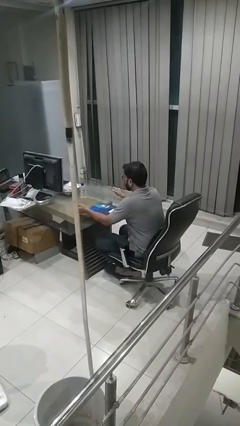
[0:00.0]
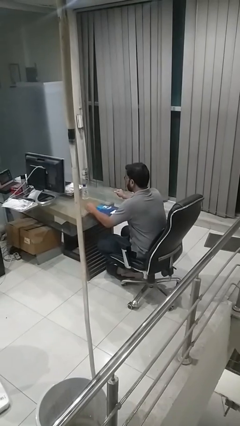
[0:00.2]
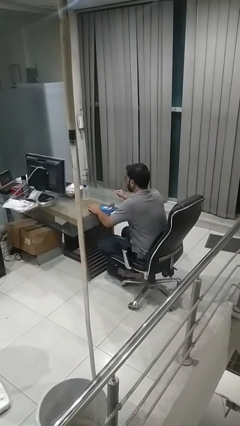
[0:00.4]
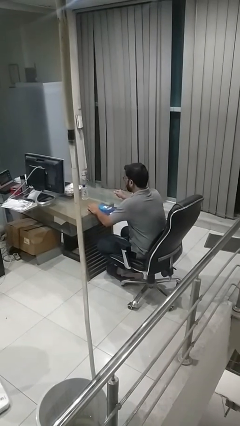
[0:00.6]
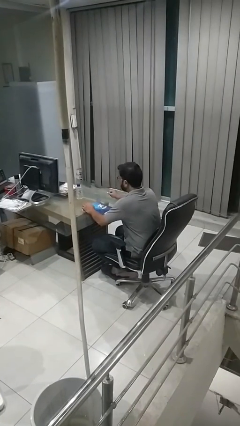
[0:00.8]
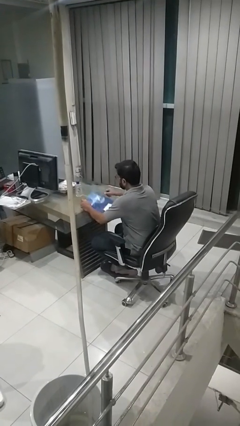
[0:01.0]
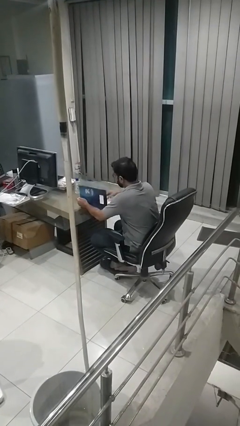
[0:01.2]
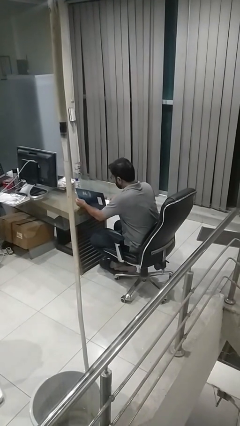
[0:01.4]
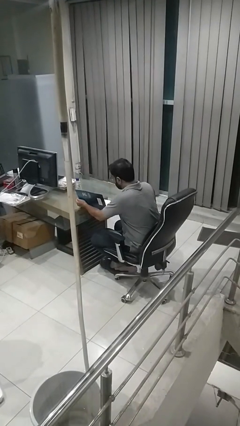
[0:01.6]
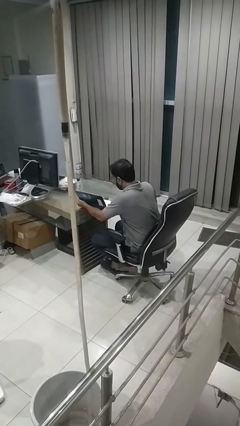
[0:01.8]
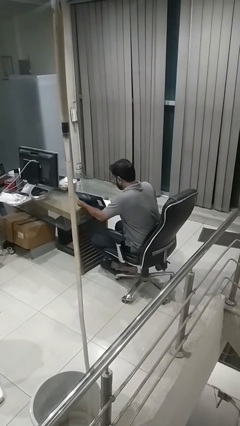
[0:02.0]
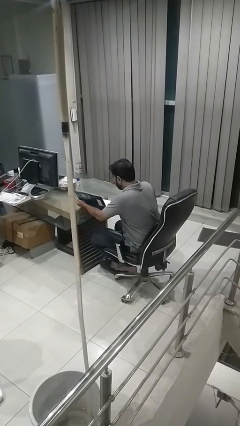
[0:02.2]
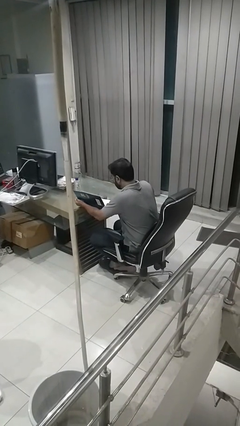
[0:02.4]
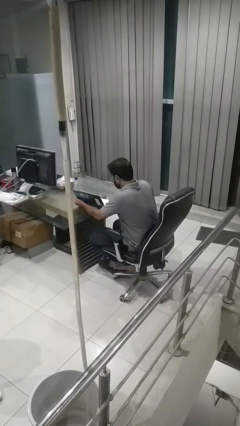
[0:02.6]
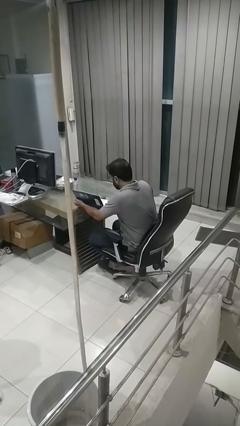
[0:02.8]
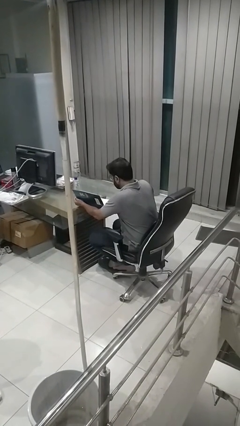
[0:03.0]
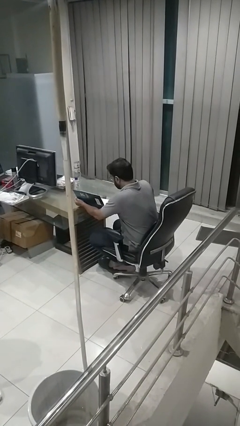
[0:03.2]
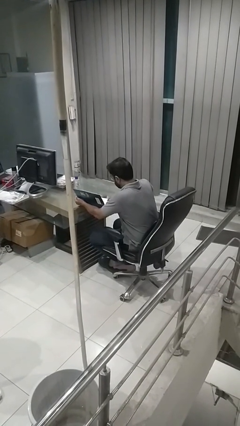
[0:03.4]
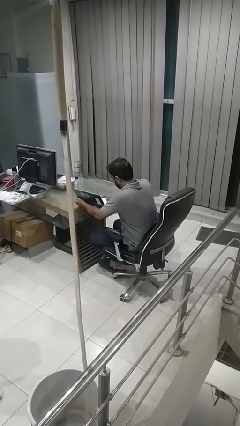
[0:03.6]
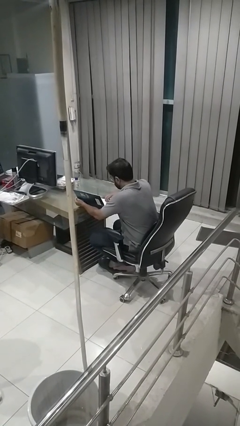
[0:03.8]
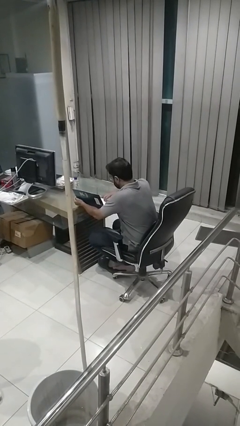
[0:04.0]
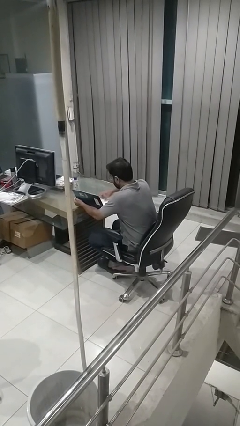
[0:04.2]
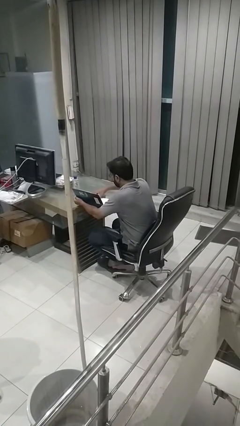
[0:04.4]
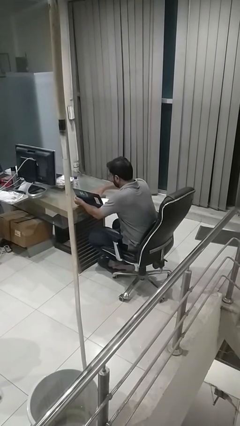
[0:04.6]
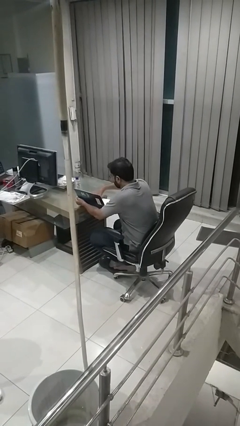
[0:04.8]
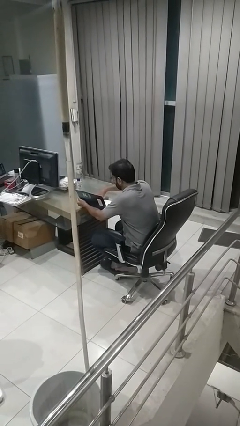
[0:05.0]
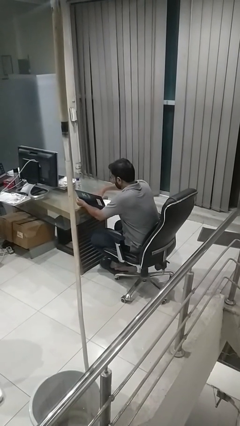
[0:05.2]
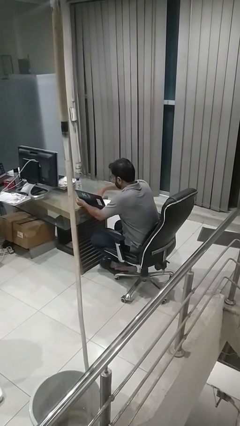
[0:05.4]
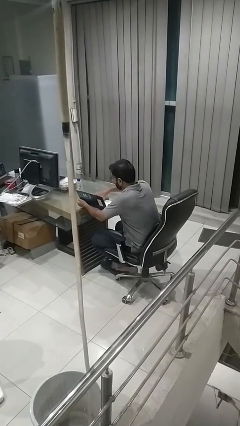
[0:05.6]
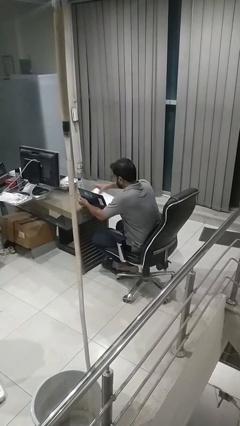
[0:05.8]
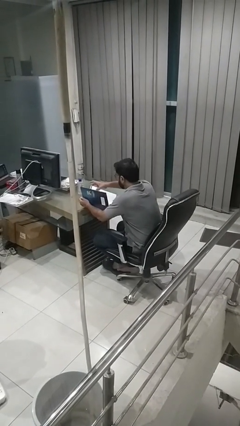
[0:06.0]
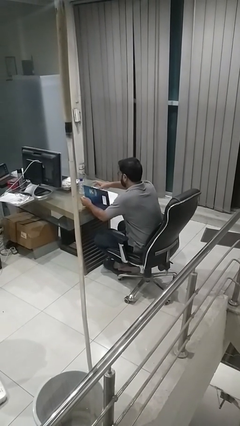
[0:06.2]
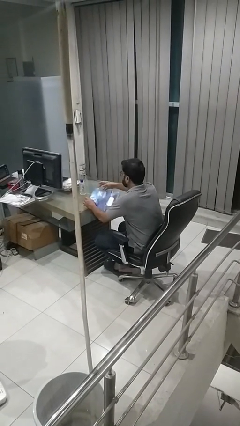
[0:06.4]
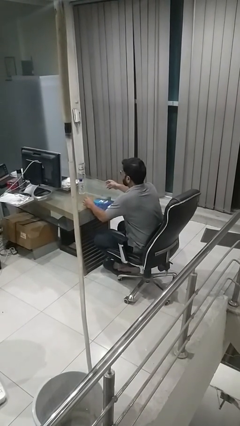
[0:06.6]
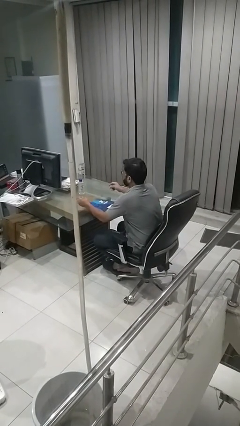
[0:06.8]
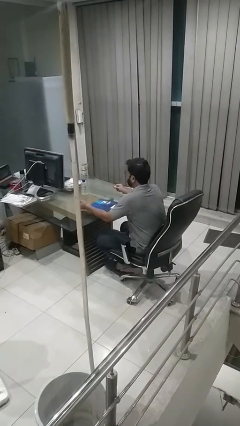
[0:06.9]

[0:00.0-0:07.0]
person reads magazine

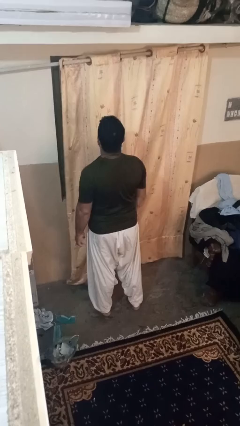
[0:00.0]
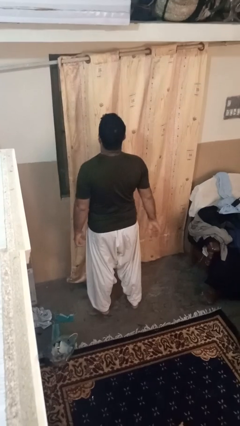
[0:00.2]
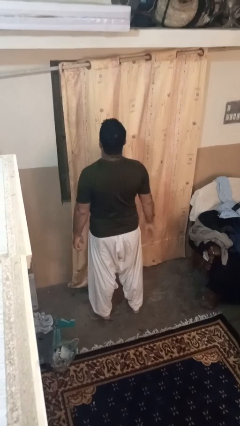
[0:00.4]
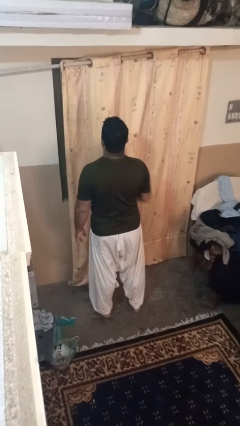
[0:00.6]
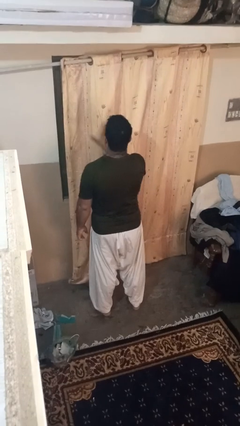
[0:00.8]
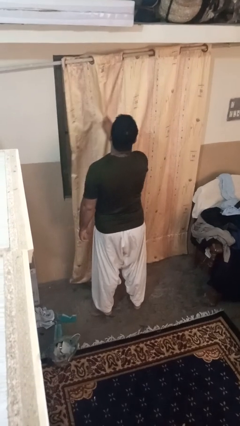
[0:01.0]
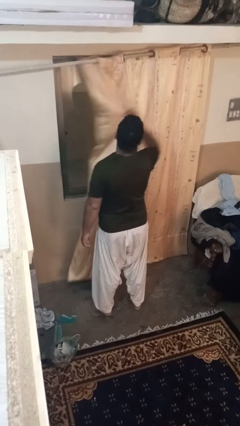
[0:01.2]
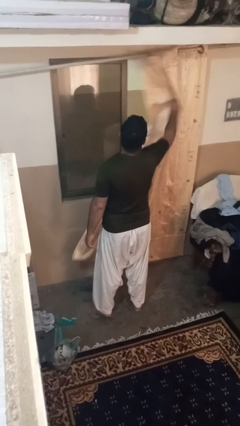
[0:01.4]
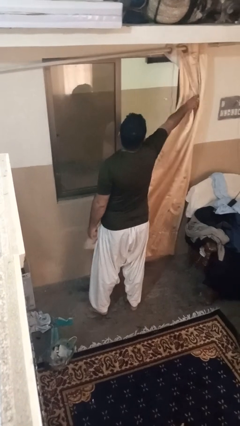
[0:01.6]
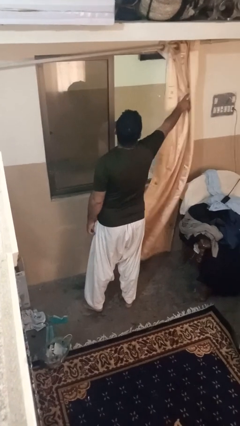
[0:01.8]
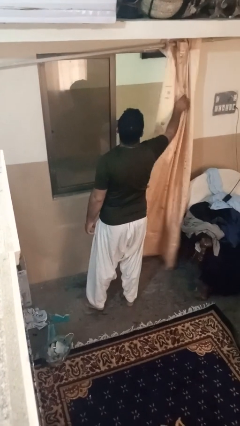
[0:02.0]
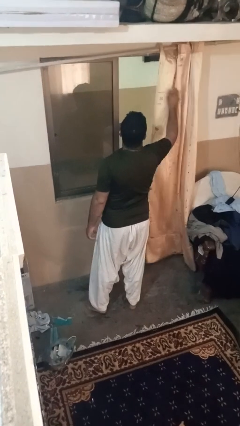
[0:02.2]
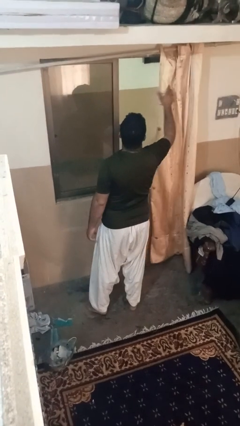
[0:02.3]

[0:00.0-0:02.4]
person opens curtains

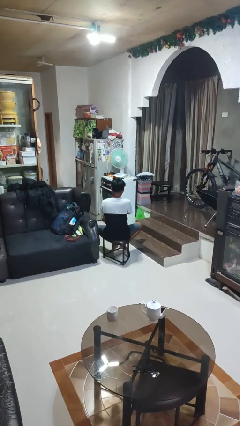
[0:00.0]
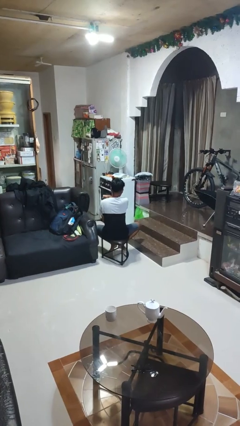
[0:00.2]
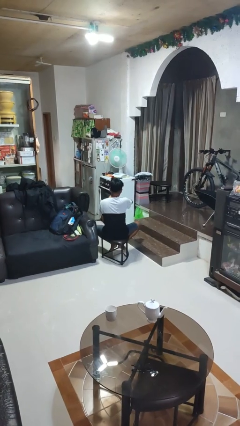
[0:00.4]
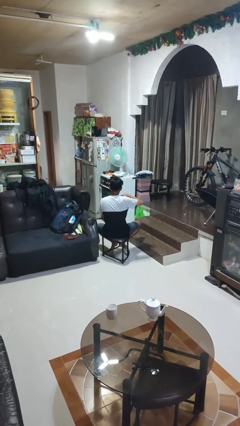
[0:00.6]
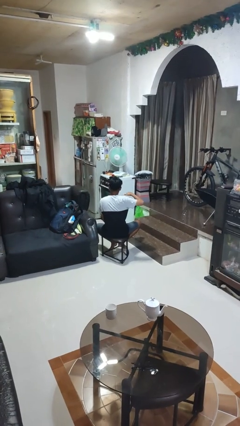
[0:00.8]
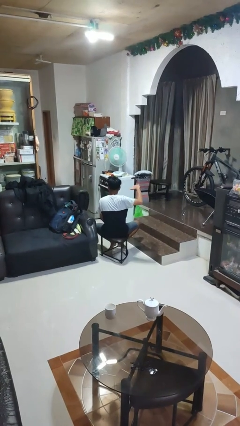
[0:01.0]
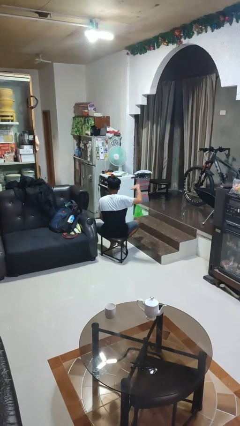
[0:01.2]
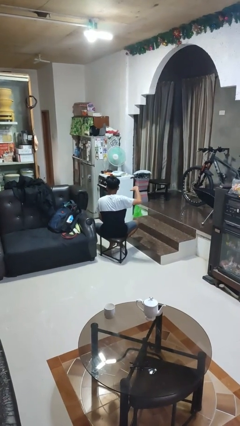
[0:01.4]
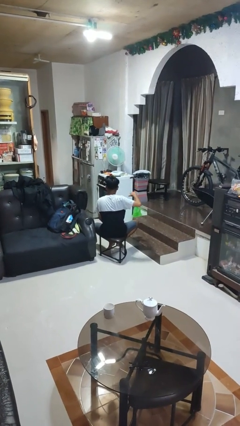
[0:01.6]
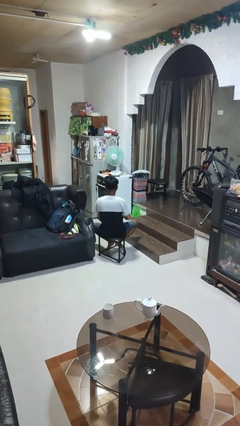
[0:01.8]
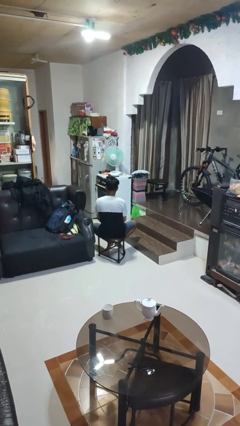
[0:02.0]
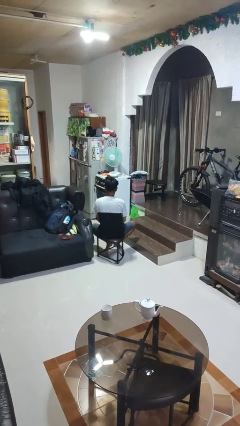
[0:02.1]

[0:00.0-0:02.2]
person gestures cut

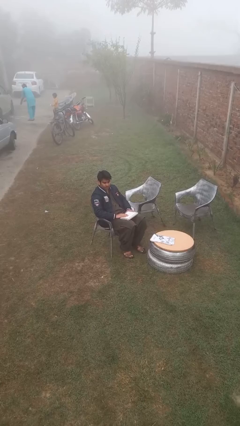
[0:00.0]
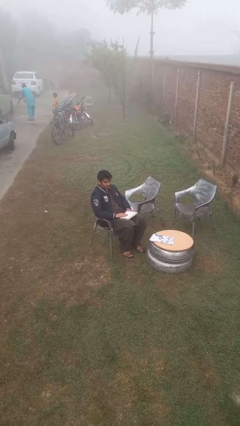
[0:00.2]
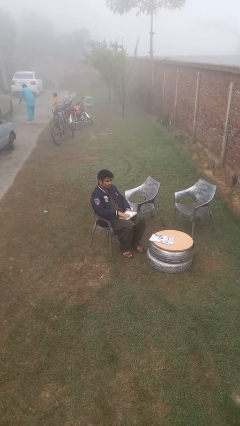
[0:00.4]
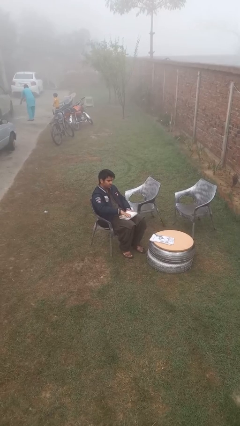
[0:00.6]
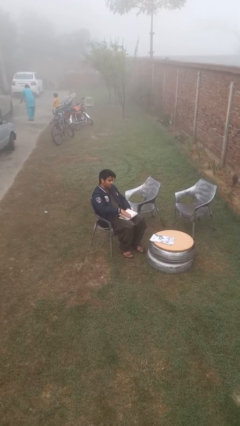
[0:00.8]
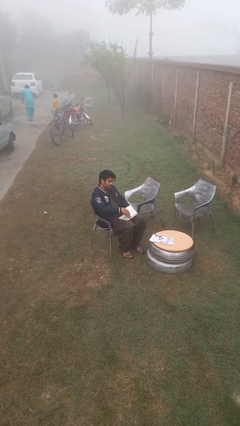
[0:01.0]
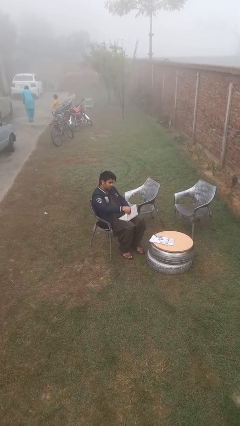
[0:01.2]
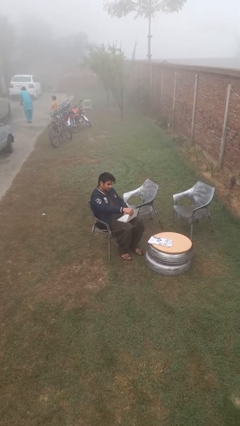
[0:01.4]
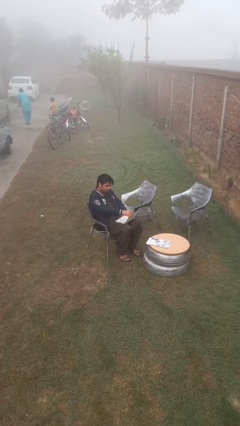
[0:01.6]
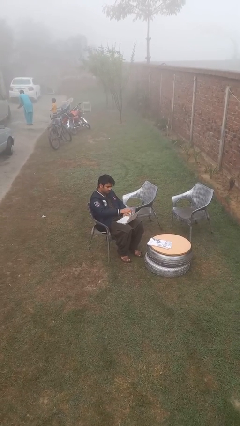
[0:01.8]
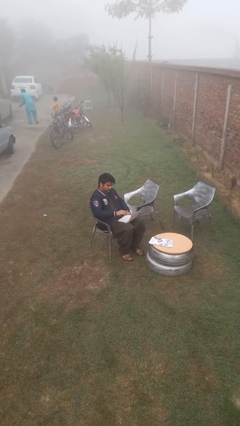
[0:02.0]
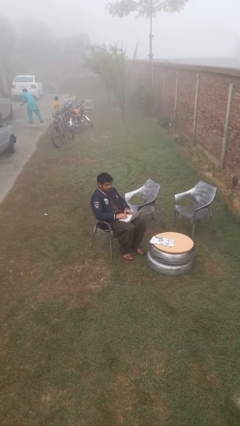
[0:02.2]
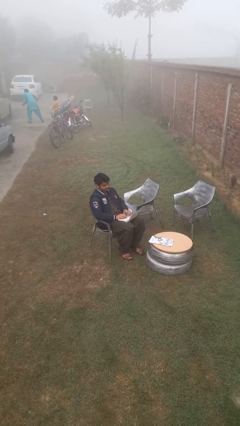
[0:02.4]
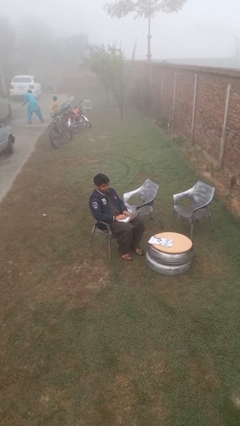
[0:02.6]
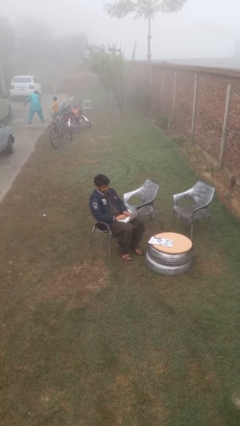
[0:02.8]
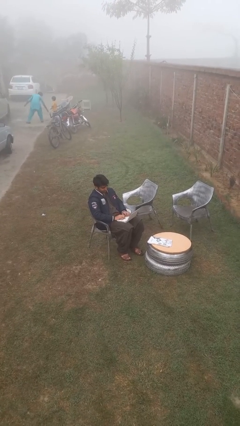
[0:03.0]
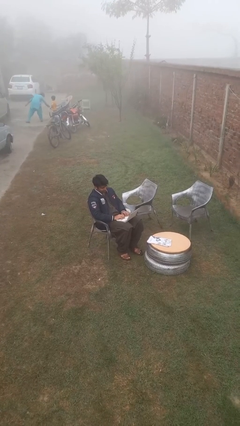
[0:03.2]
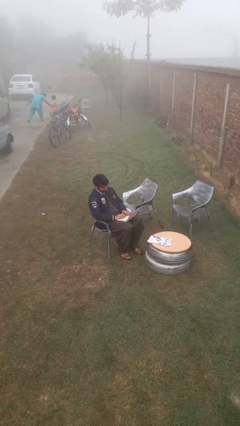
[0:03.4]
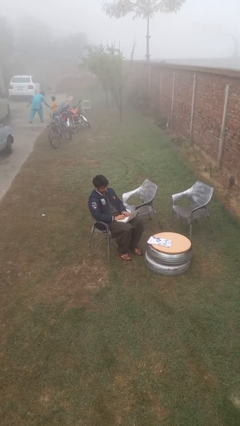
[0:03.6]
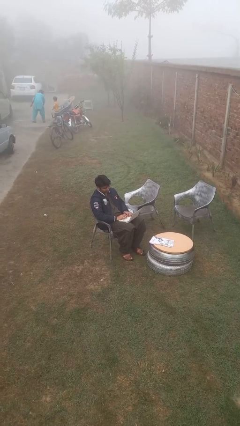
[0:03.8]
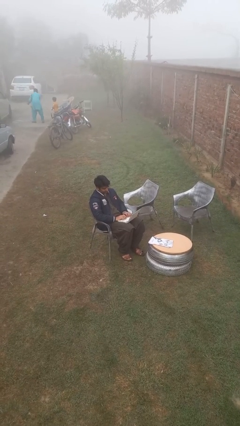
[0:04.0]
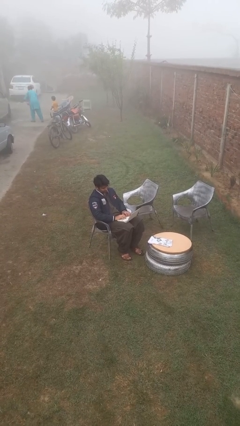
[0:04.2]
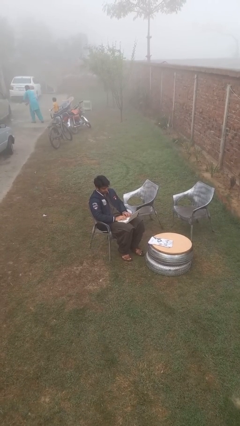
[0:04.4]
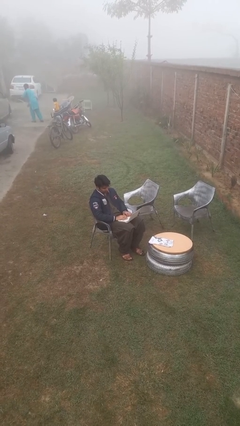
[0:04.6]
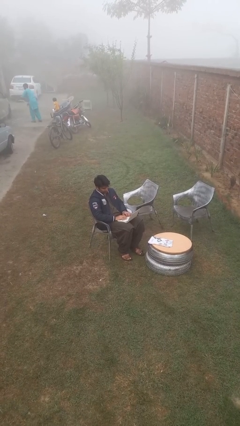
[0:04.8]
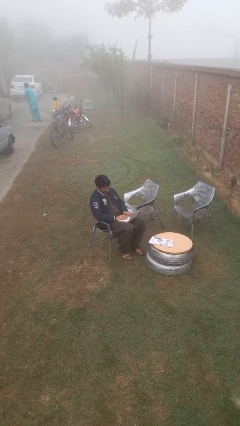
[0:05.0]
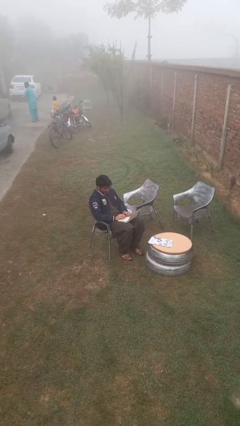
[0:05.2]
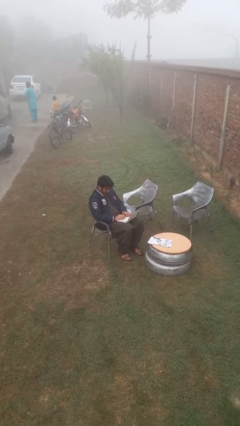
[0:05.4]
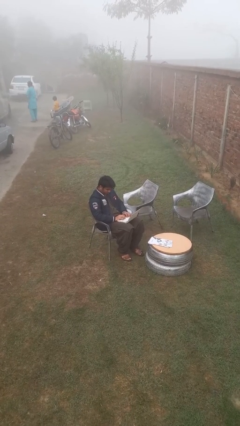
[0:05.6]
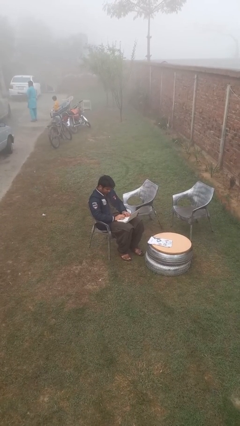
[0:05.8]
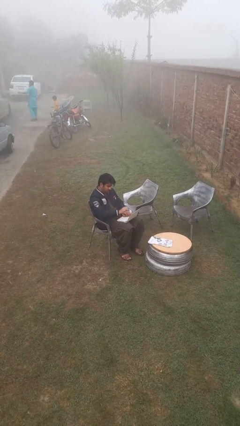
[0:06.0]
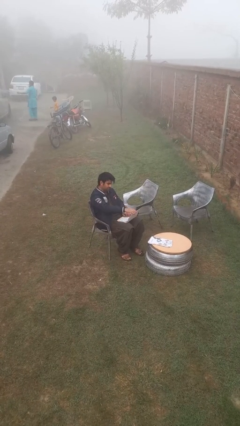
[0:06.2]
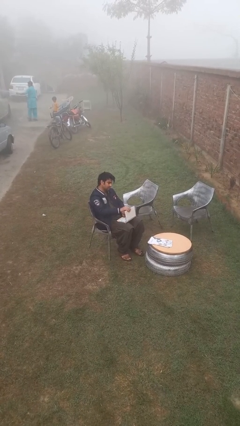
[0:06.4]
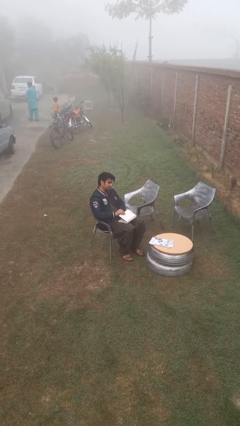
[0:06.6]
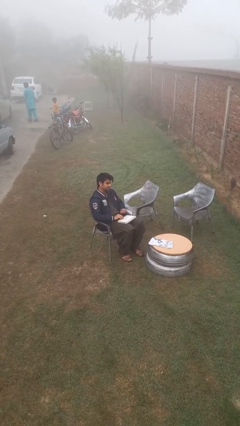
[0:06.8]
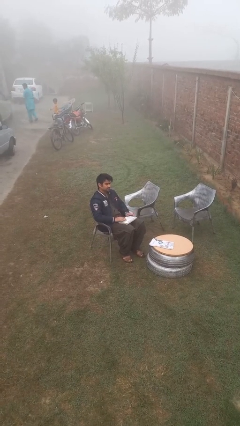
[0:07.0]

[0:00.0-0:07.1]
person interacts with laptop
